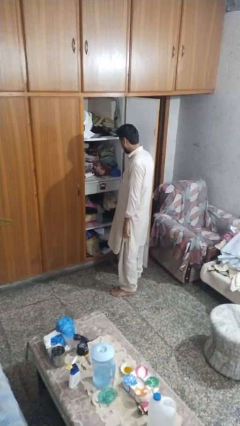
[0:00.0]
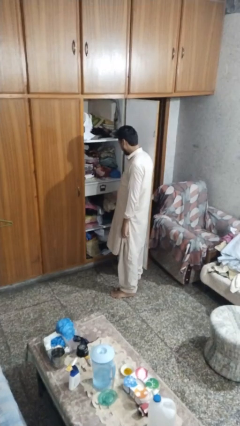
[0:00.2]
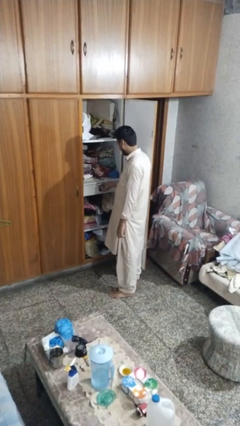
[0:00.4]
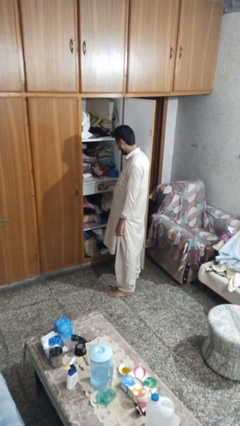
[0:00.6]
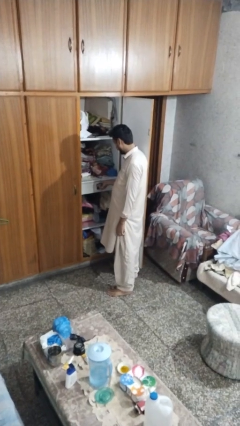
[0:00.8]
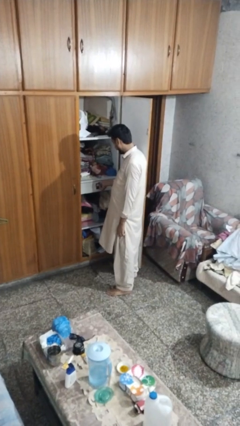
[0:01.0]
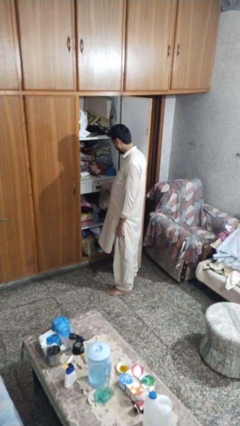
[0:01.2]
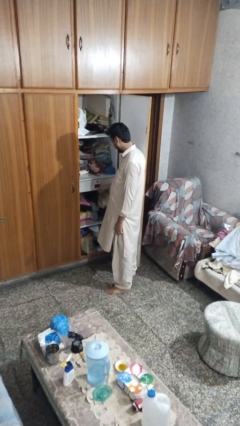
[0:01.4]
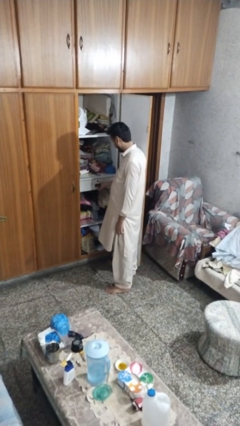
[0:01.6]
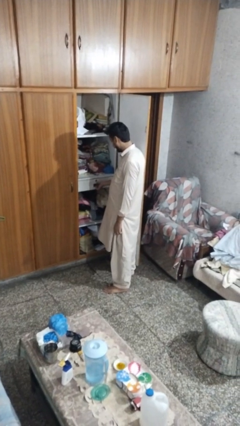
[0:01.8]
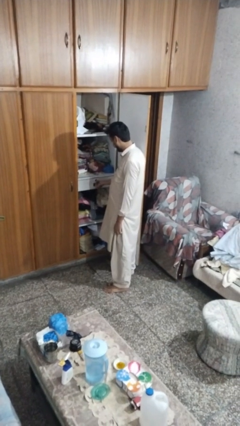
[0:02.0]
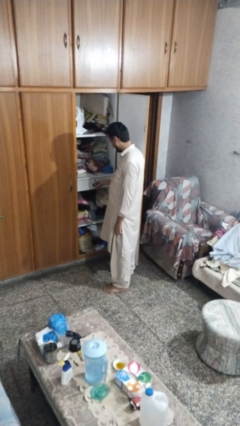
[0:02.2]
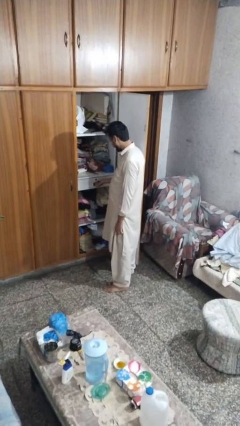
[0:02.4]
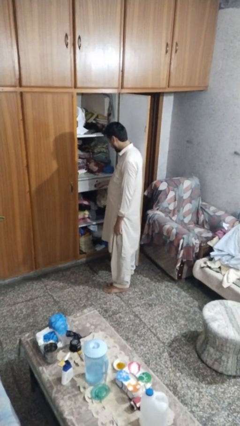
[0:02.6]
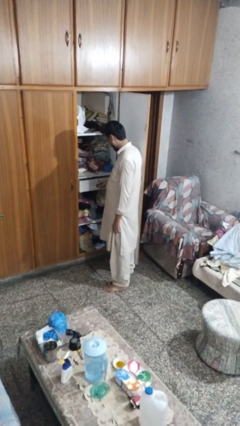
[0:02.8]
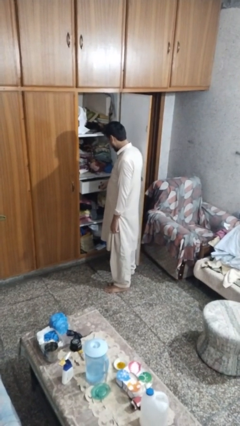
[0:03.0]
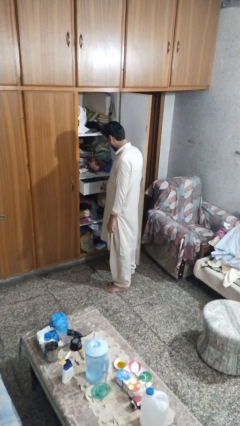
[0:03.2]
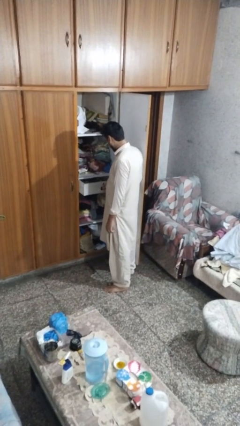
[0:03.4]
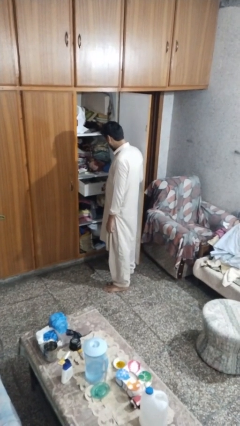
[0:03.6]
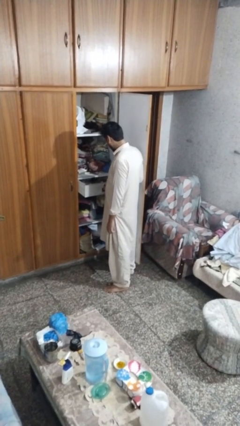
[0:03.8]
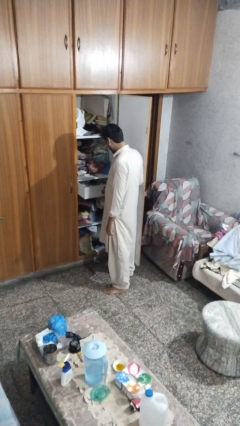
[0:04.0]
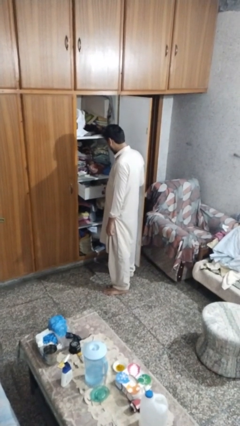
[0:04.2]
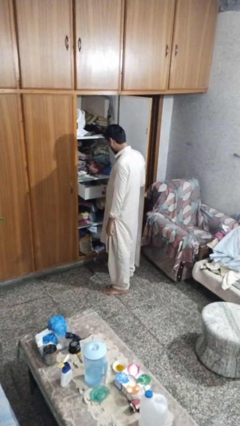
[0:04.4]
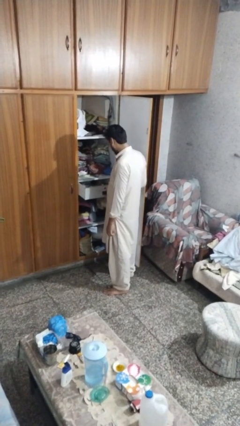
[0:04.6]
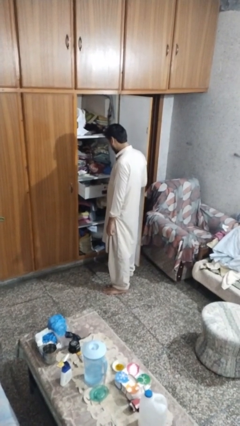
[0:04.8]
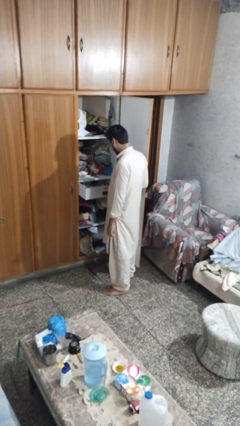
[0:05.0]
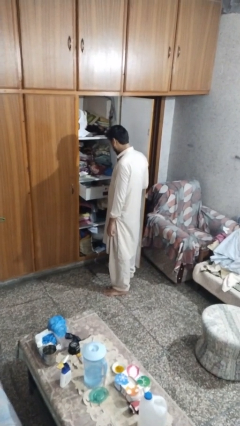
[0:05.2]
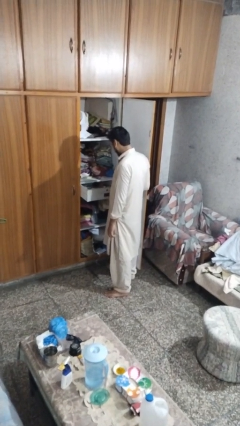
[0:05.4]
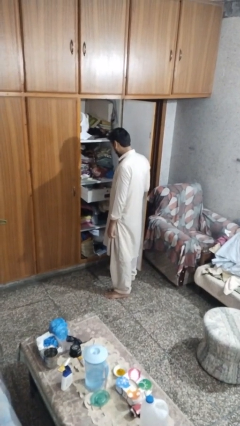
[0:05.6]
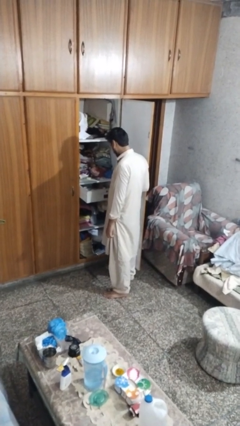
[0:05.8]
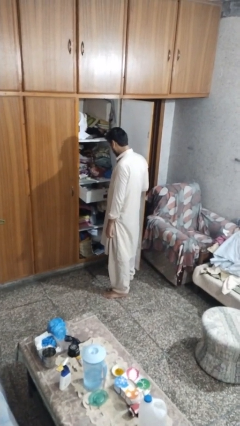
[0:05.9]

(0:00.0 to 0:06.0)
person opens dresser drawer

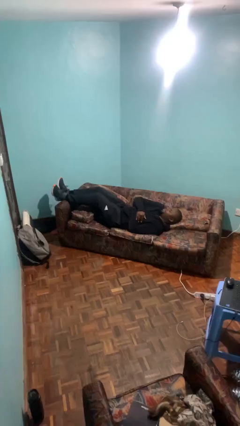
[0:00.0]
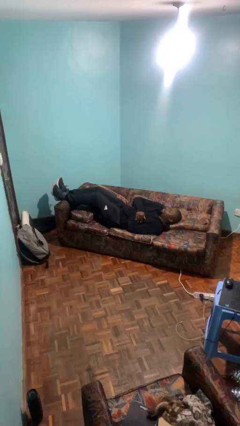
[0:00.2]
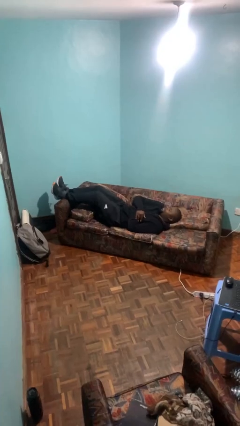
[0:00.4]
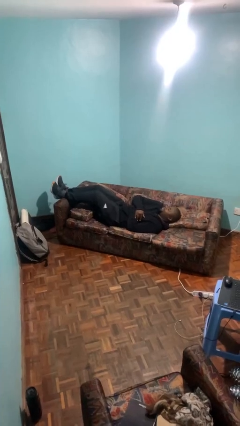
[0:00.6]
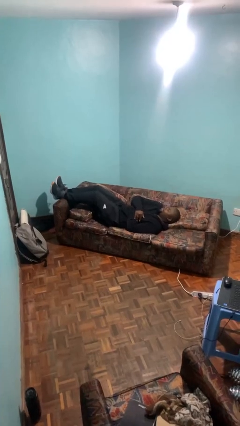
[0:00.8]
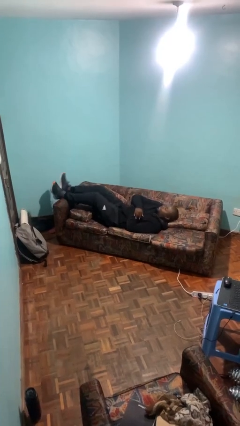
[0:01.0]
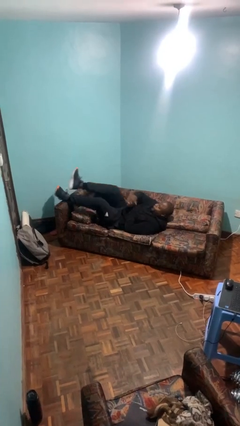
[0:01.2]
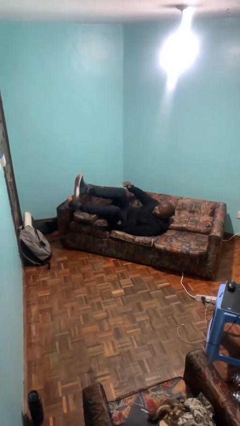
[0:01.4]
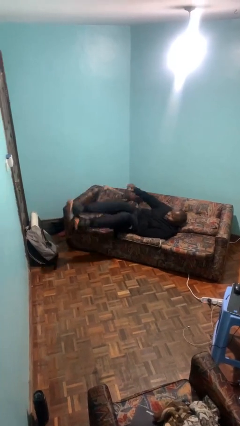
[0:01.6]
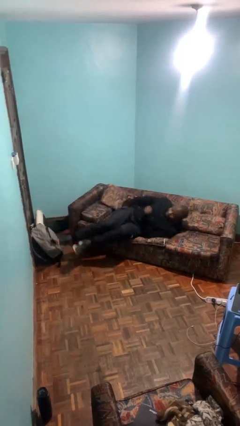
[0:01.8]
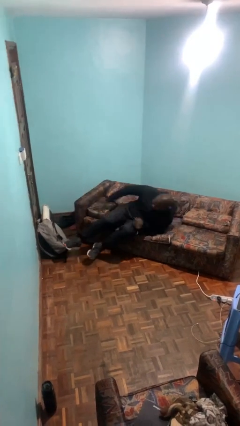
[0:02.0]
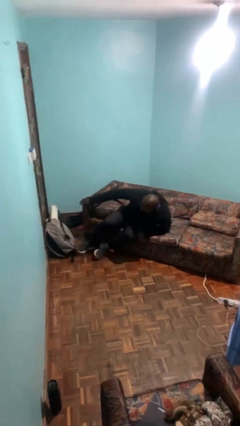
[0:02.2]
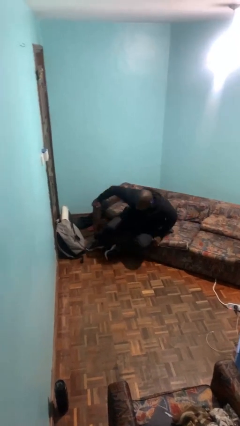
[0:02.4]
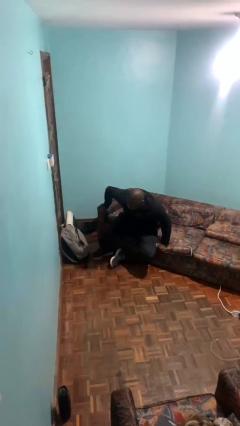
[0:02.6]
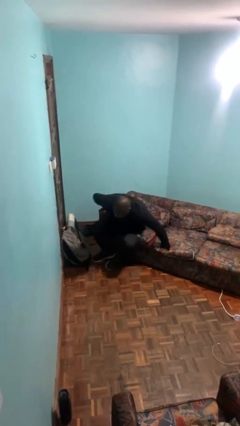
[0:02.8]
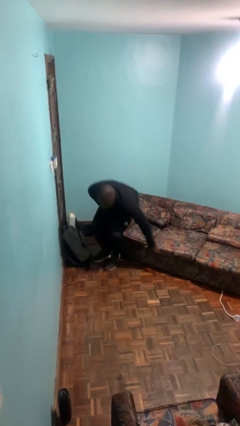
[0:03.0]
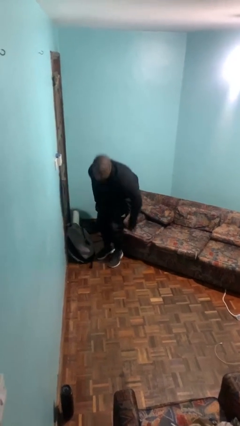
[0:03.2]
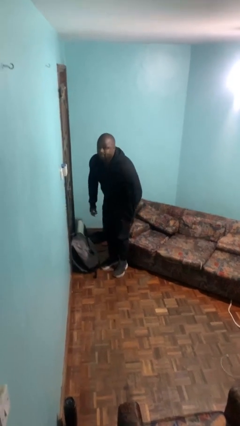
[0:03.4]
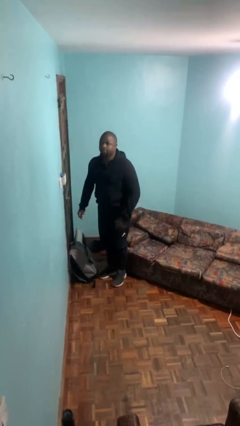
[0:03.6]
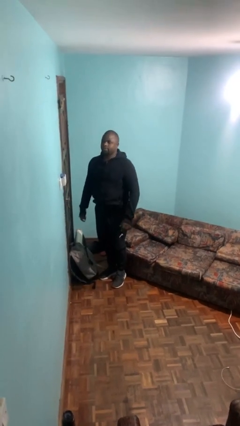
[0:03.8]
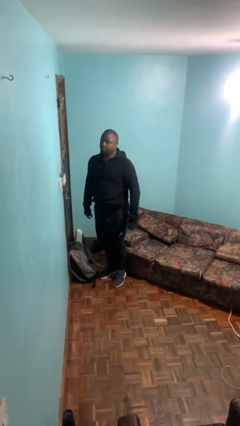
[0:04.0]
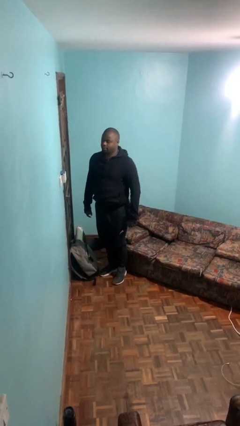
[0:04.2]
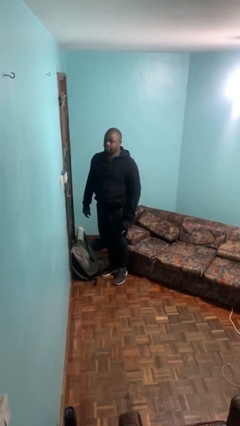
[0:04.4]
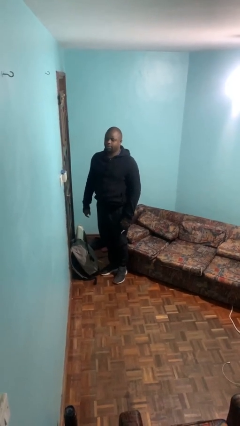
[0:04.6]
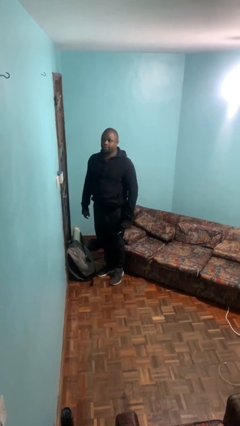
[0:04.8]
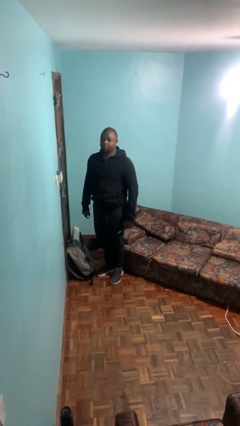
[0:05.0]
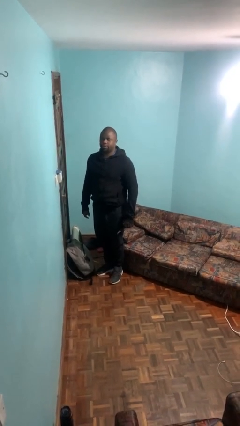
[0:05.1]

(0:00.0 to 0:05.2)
person stands up

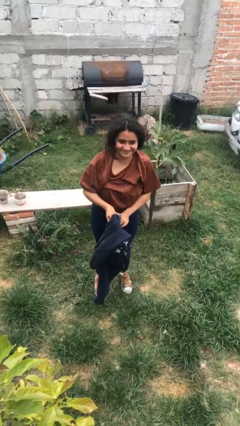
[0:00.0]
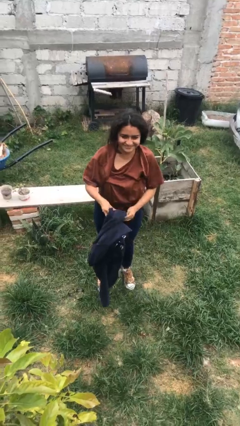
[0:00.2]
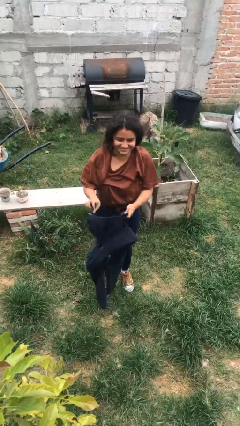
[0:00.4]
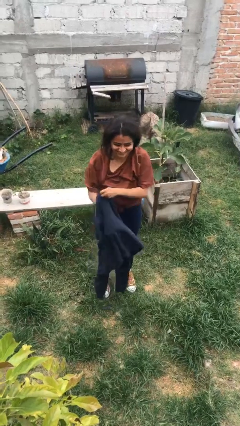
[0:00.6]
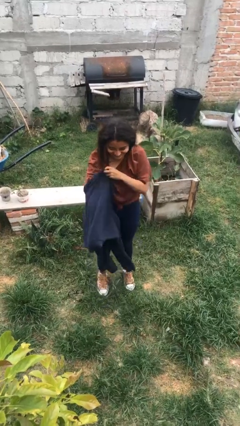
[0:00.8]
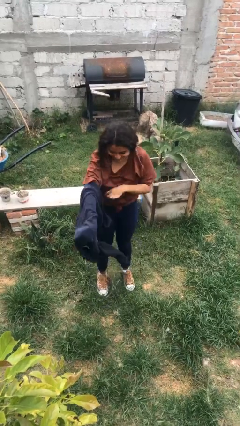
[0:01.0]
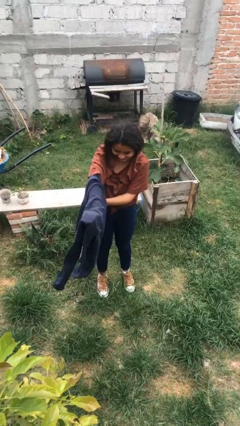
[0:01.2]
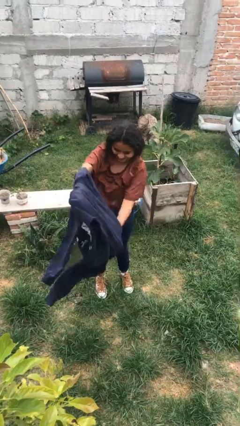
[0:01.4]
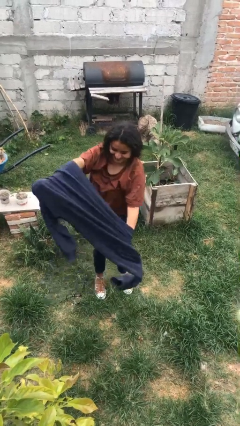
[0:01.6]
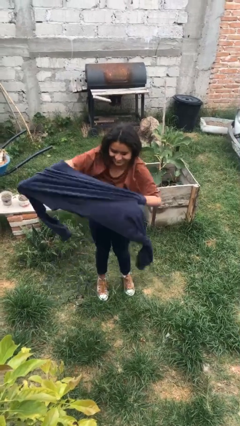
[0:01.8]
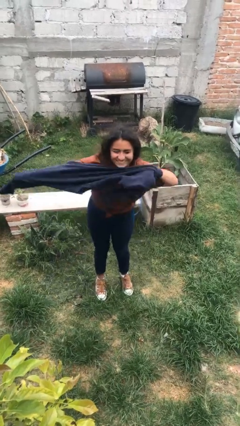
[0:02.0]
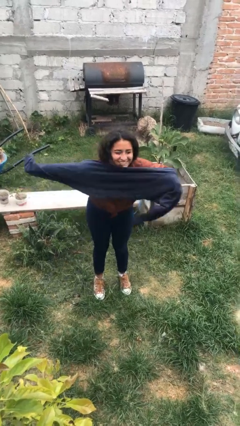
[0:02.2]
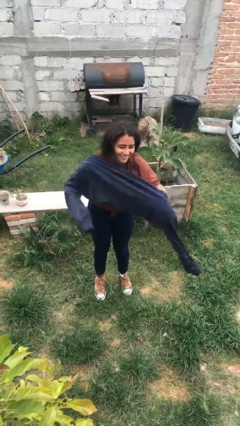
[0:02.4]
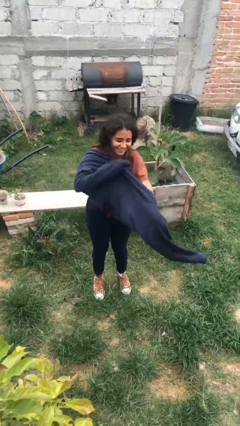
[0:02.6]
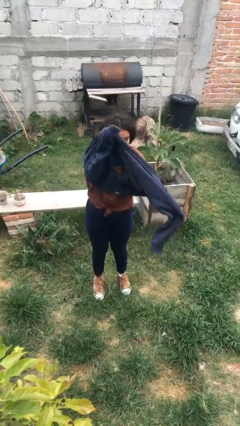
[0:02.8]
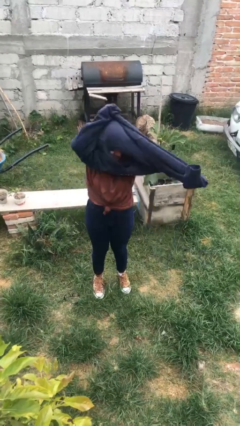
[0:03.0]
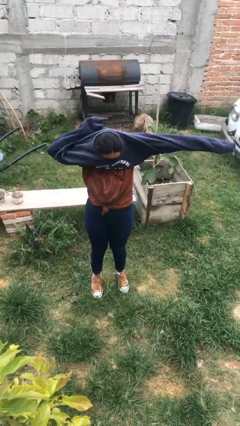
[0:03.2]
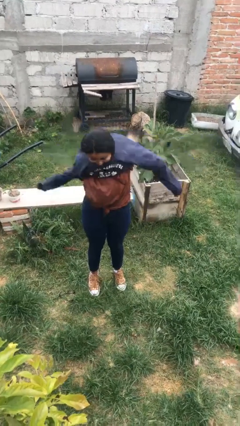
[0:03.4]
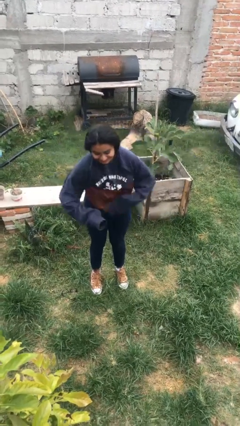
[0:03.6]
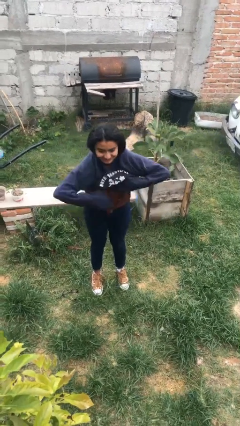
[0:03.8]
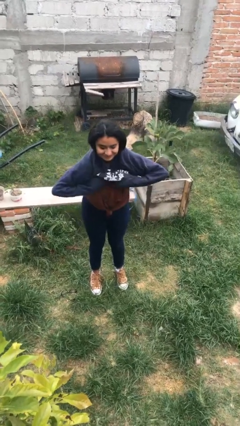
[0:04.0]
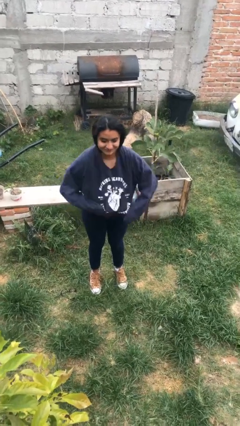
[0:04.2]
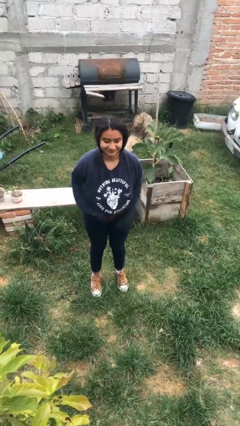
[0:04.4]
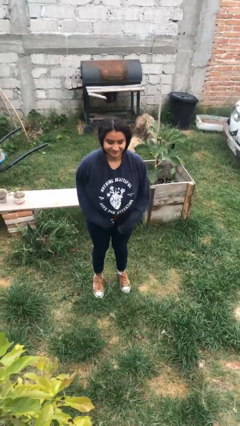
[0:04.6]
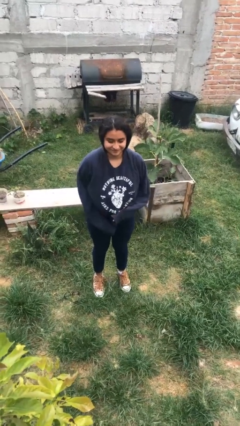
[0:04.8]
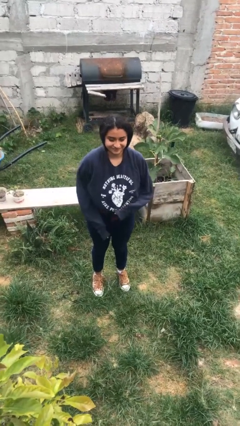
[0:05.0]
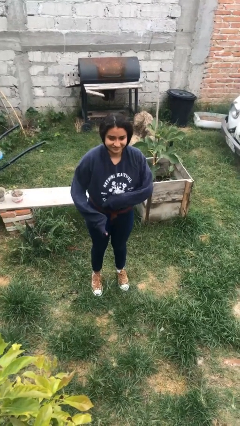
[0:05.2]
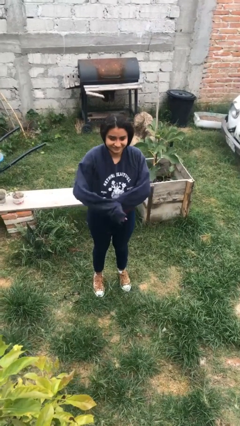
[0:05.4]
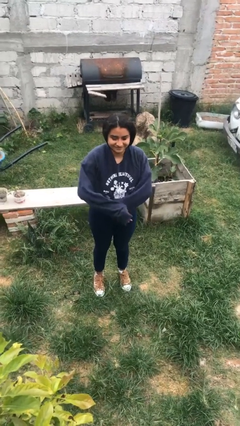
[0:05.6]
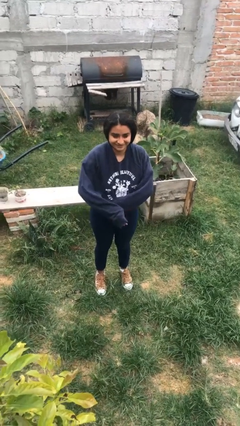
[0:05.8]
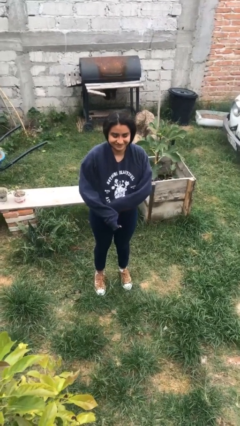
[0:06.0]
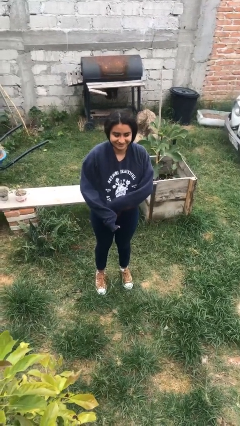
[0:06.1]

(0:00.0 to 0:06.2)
person puts on shirt

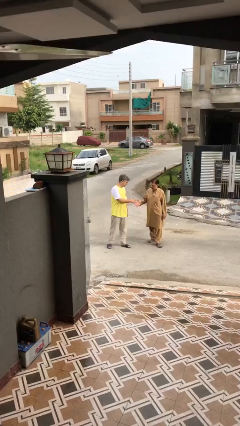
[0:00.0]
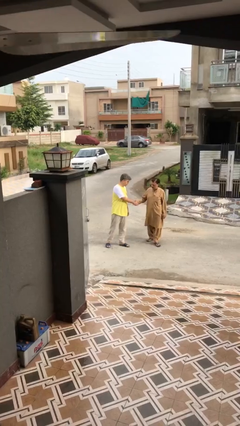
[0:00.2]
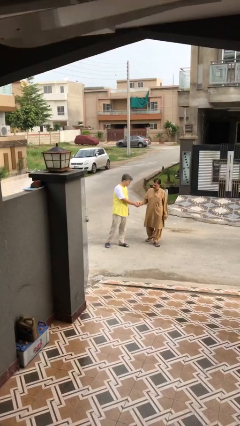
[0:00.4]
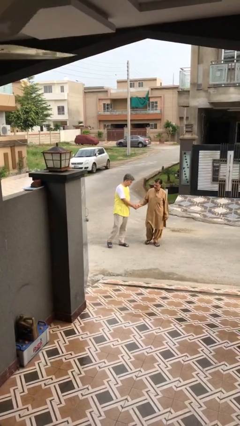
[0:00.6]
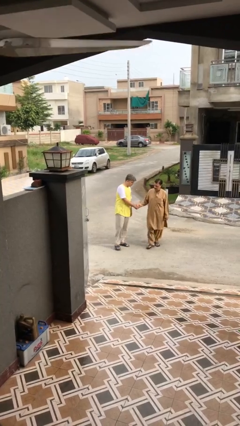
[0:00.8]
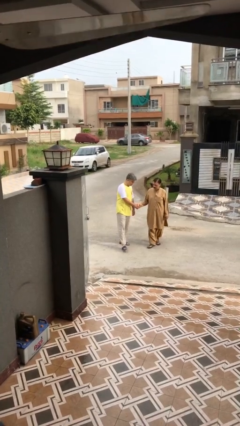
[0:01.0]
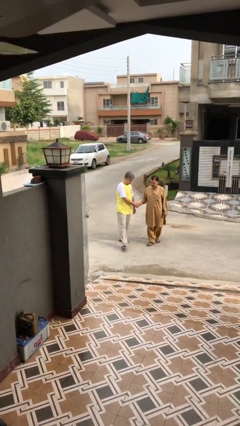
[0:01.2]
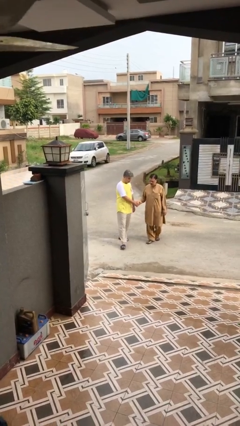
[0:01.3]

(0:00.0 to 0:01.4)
person shakes hand
